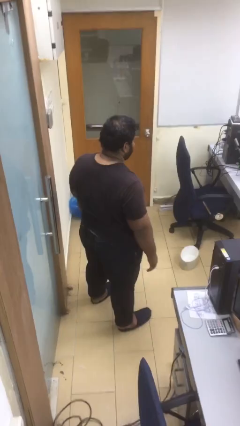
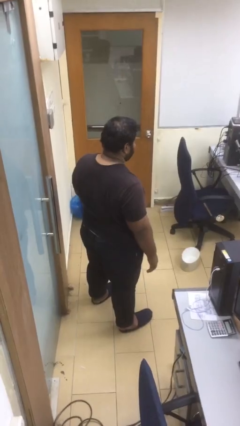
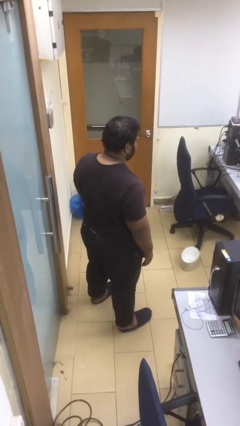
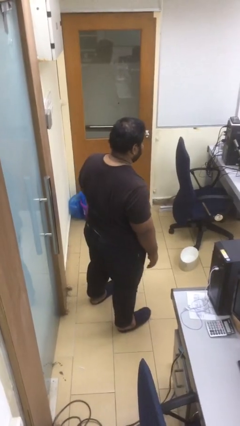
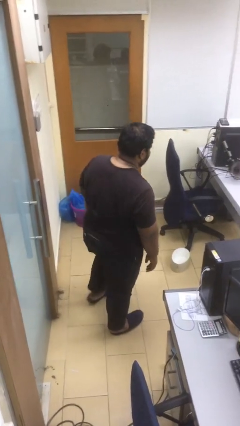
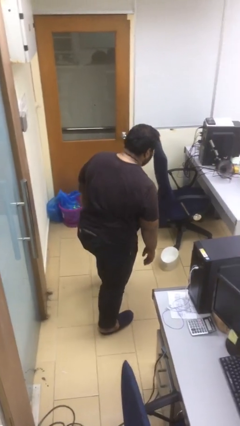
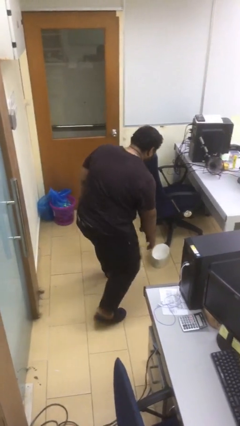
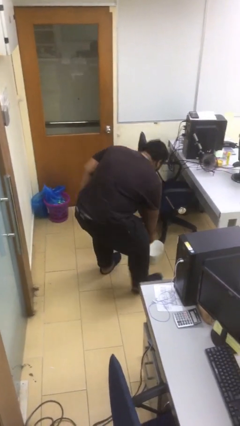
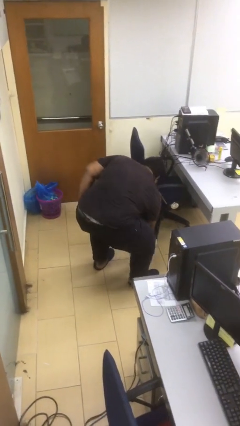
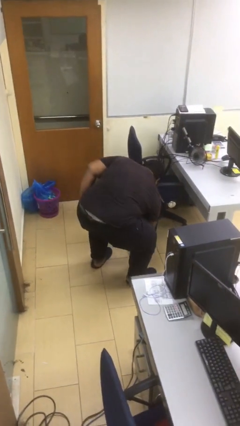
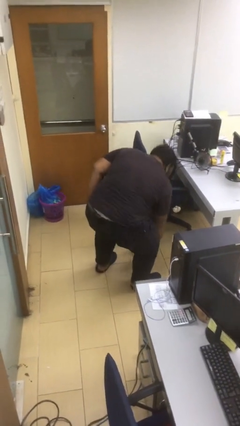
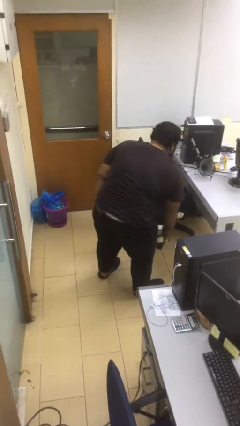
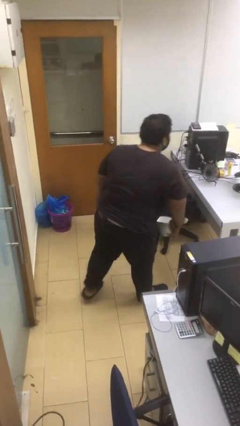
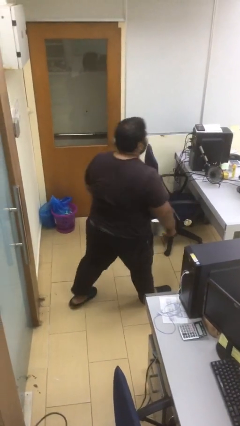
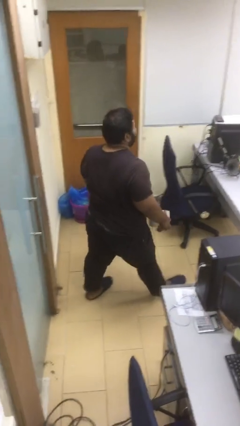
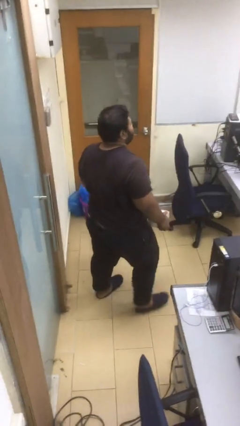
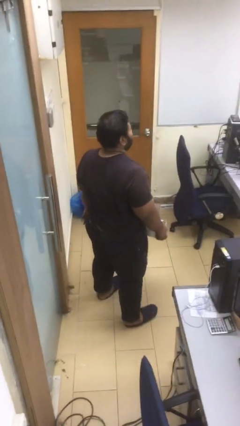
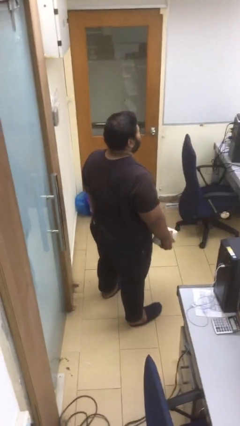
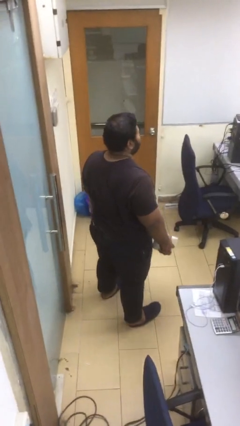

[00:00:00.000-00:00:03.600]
person picks up object from floor

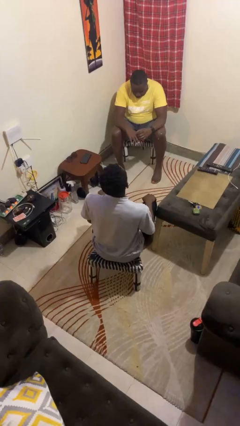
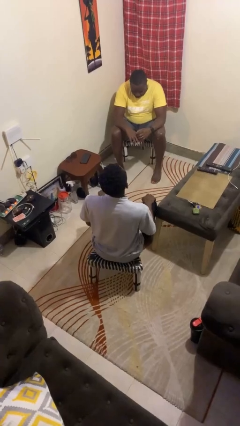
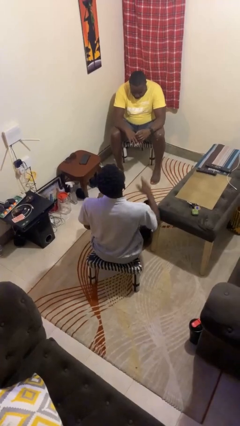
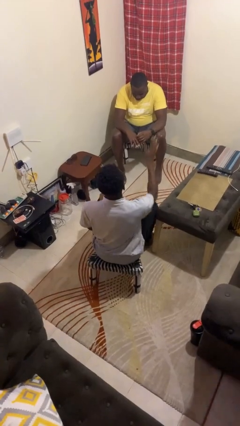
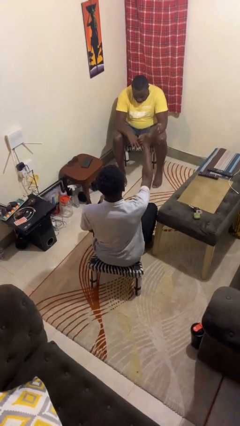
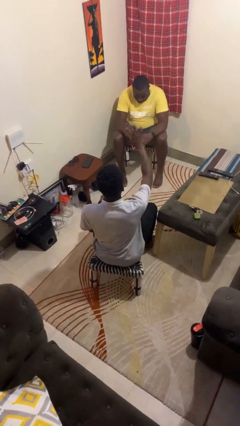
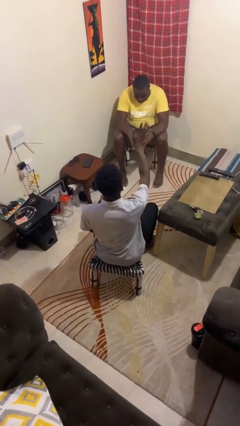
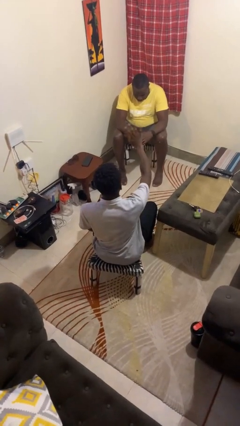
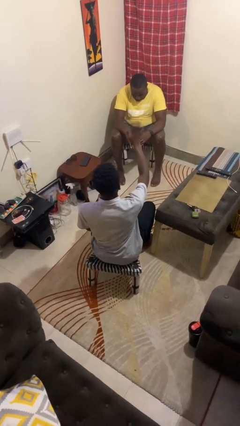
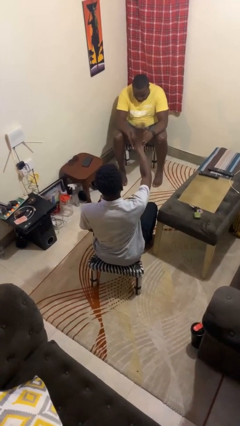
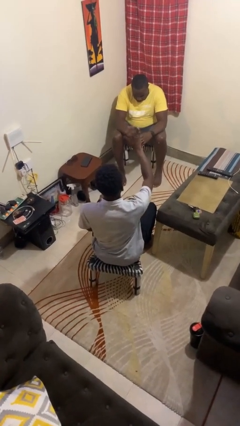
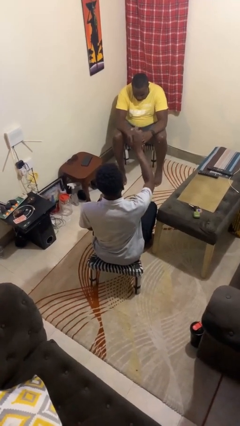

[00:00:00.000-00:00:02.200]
person waves at person

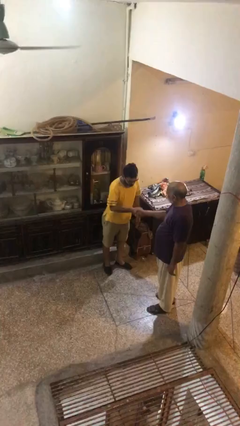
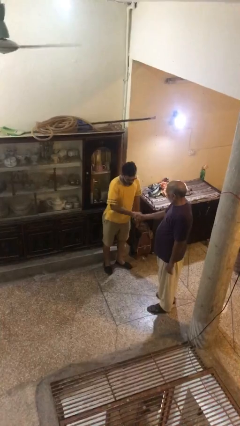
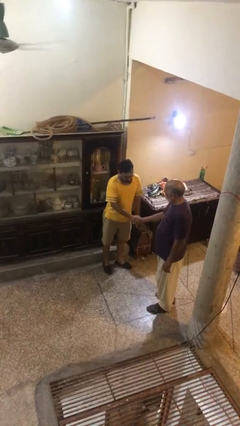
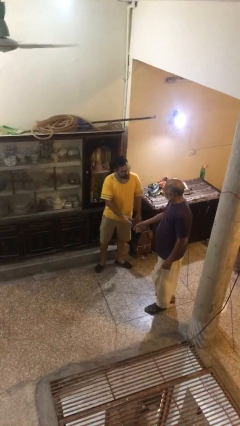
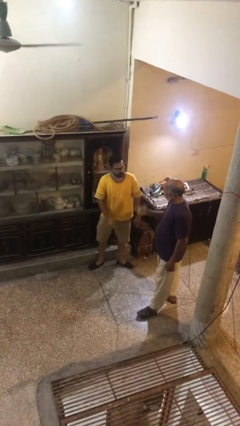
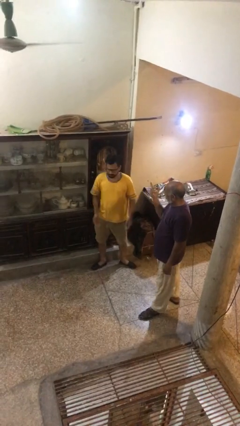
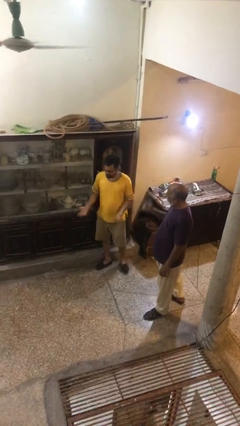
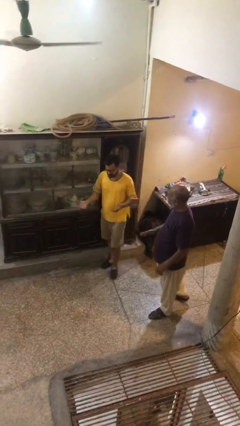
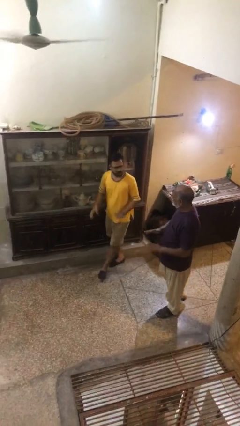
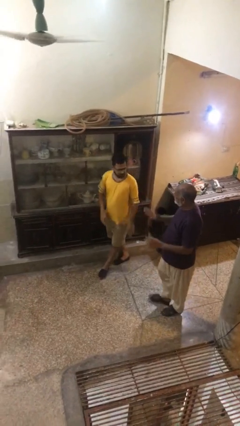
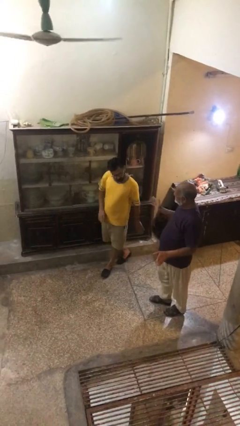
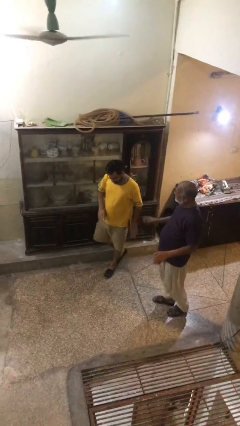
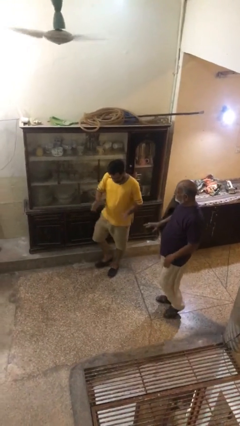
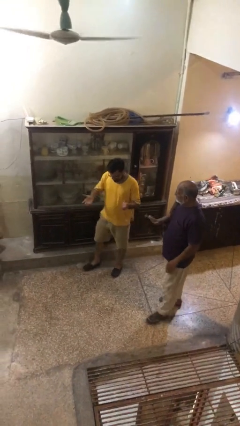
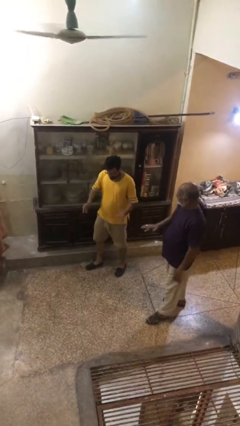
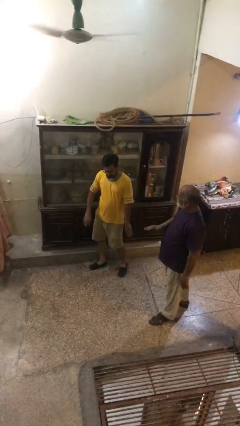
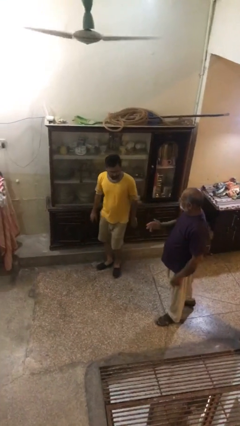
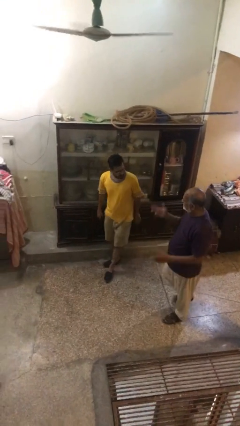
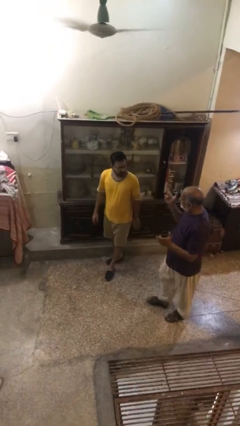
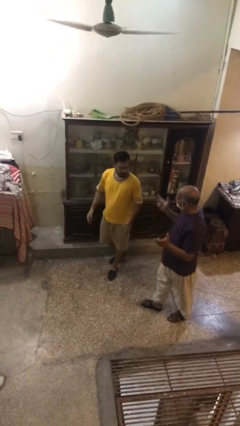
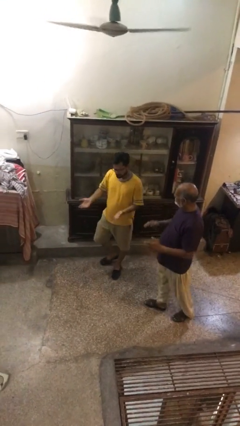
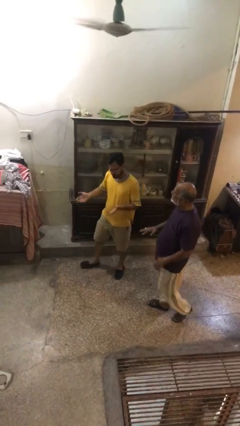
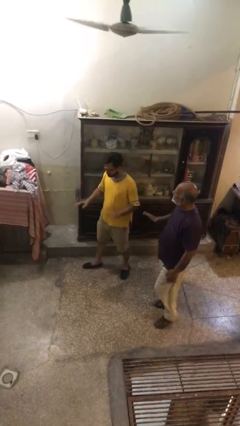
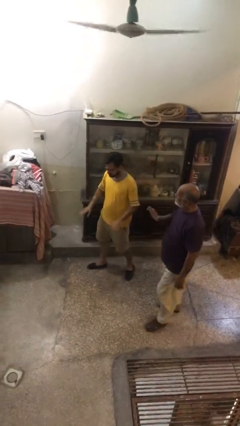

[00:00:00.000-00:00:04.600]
person talks to person

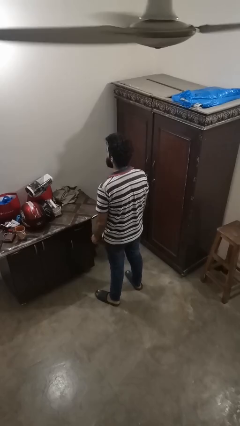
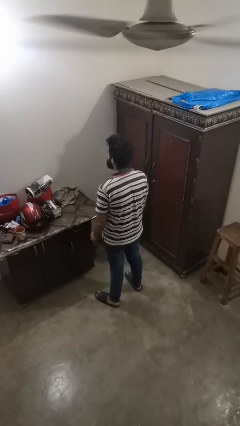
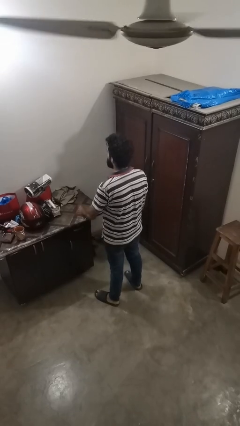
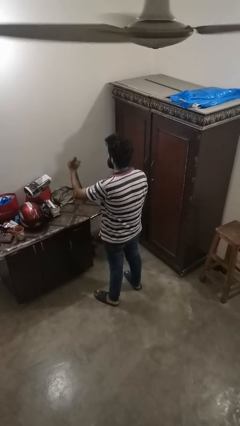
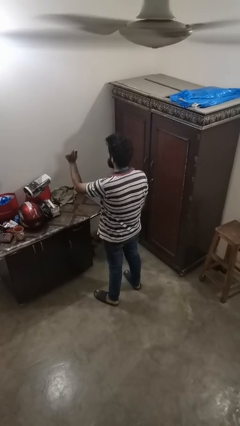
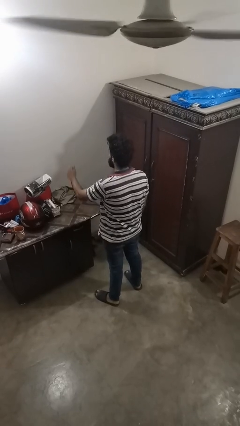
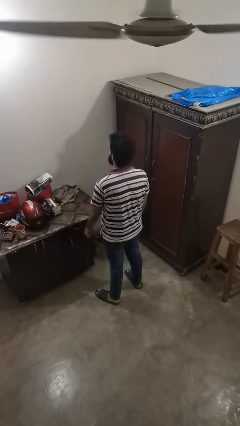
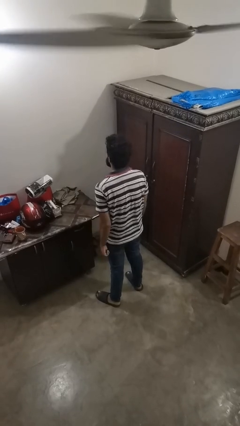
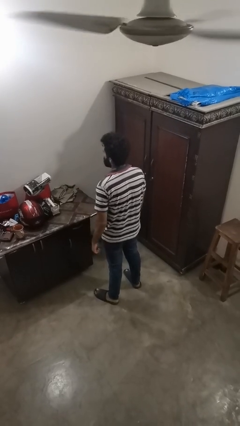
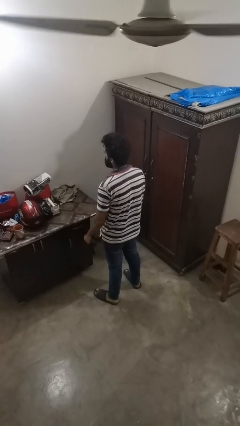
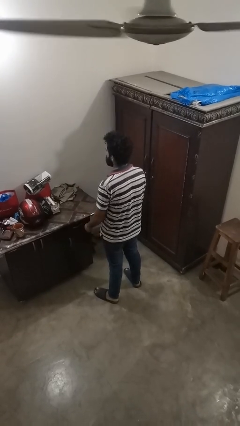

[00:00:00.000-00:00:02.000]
person snaps fingers

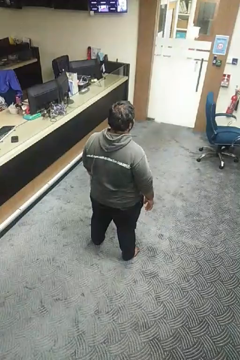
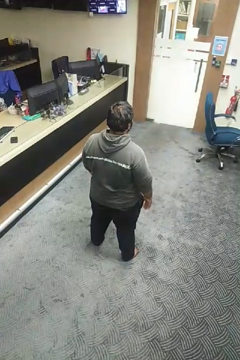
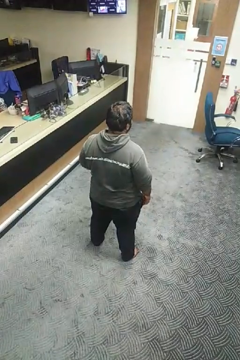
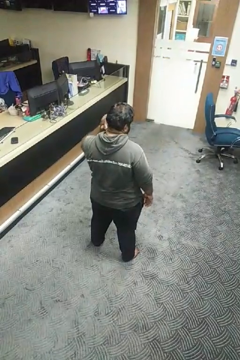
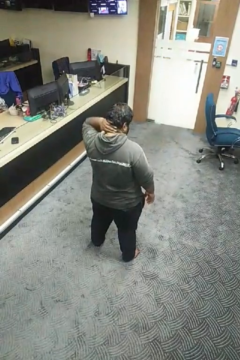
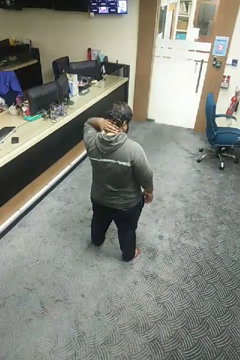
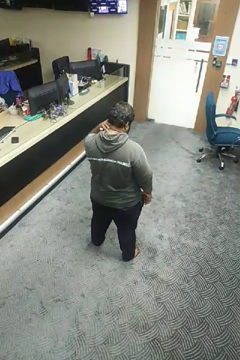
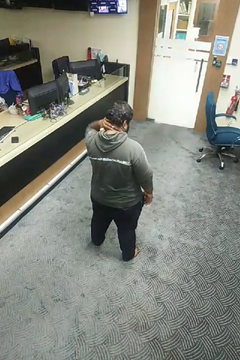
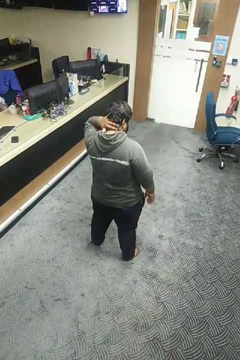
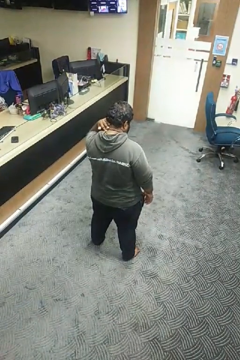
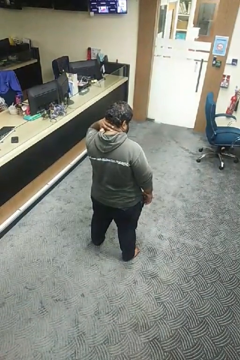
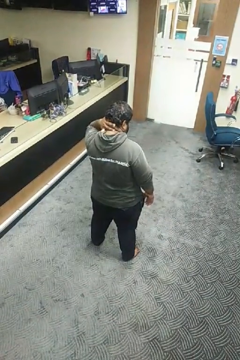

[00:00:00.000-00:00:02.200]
person rubs neck

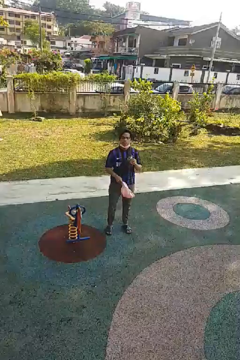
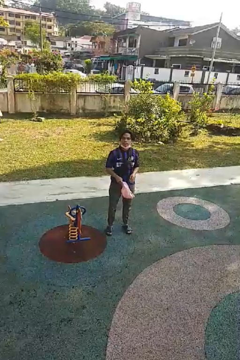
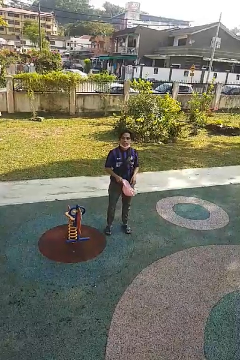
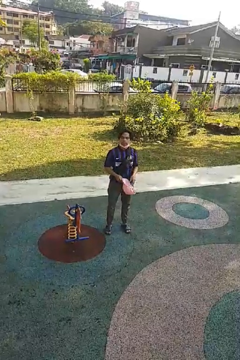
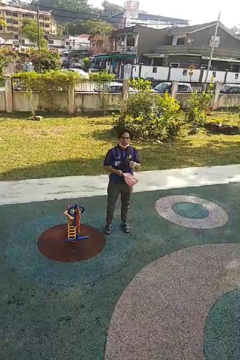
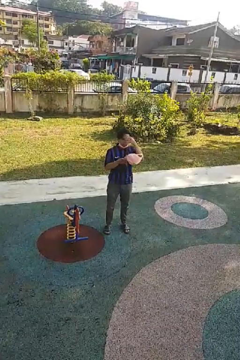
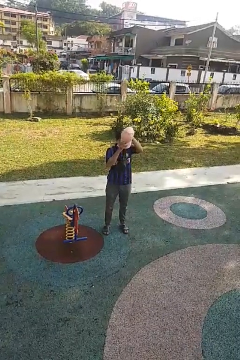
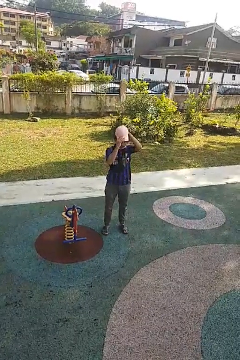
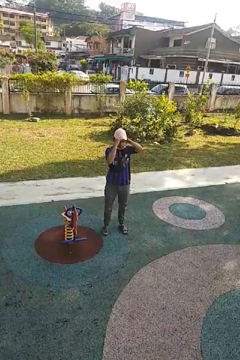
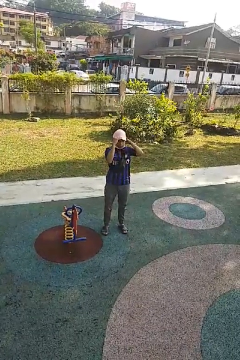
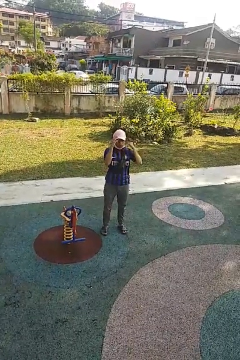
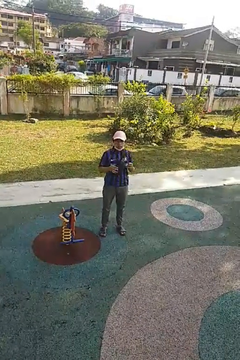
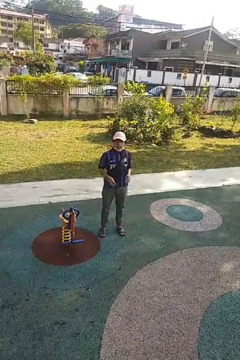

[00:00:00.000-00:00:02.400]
person puts on hat

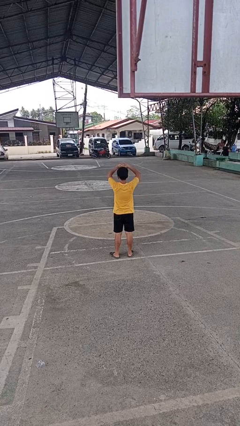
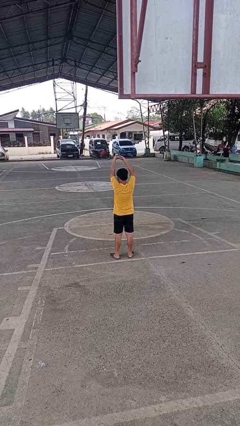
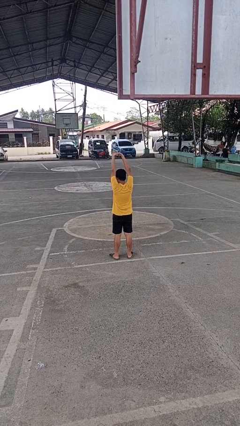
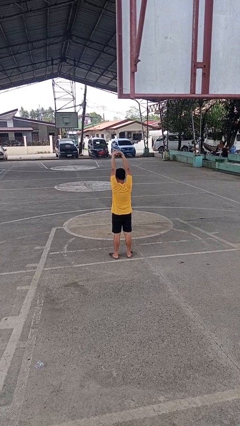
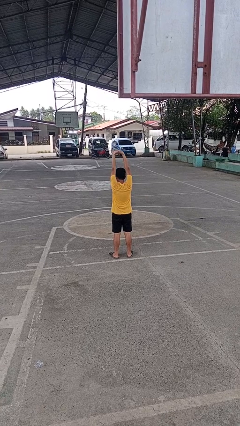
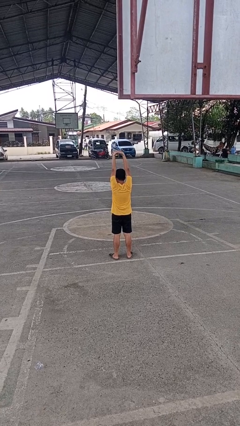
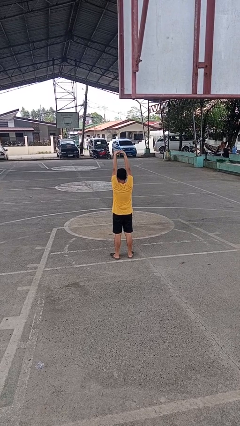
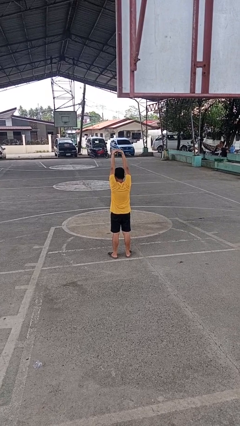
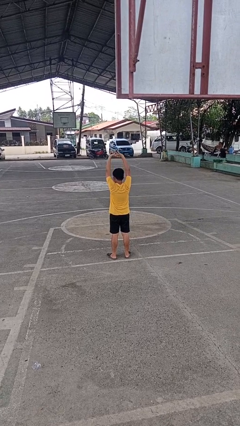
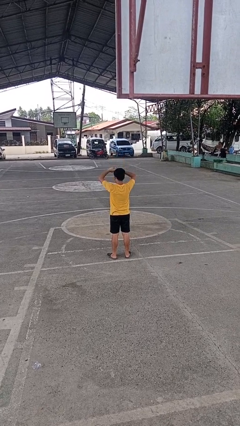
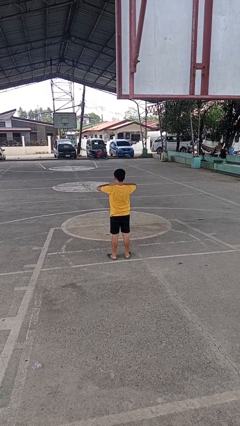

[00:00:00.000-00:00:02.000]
person stretches arms over head
